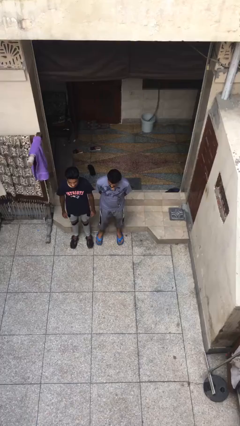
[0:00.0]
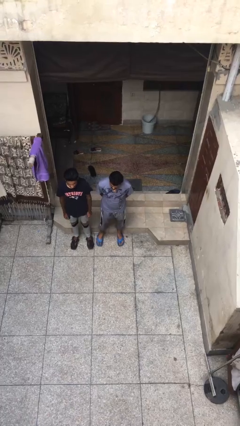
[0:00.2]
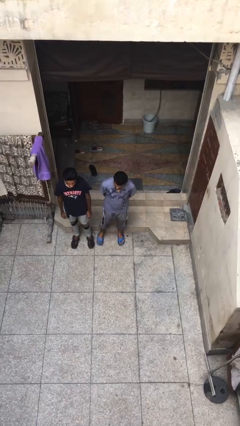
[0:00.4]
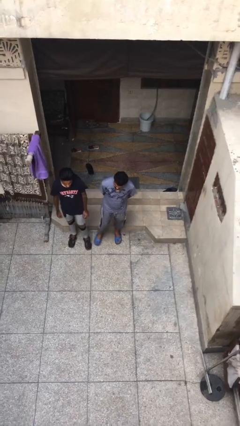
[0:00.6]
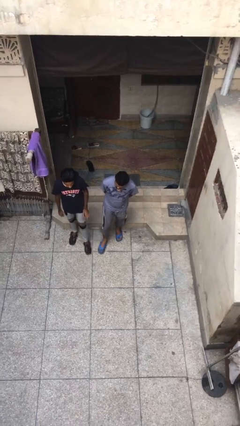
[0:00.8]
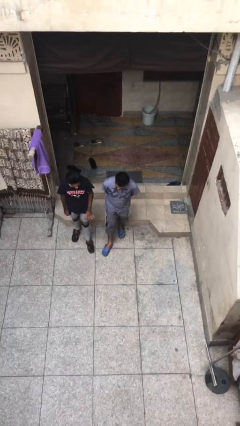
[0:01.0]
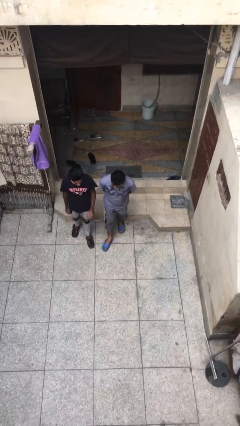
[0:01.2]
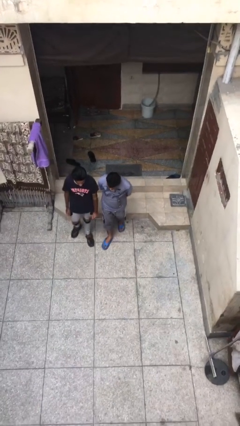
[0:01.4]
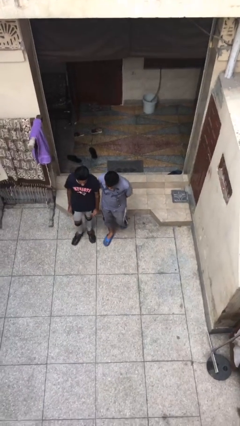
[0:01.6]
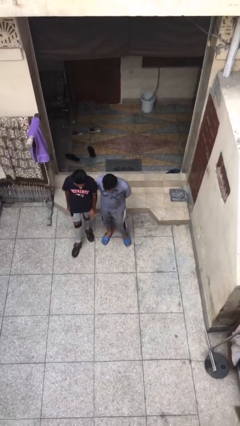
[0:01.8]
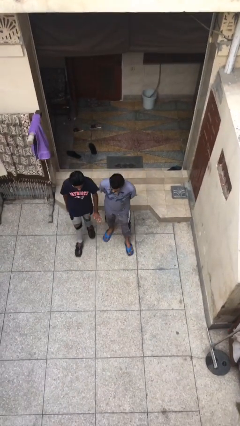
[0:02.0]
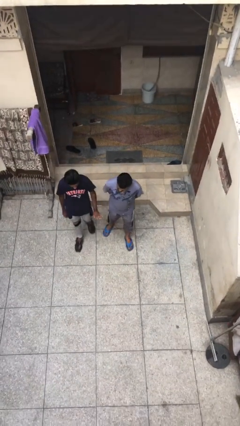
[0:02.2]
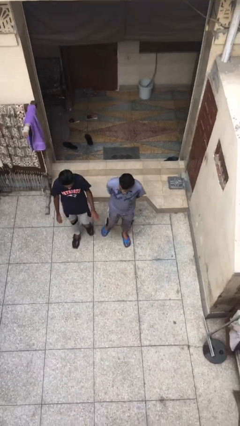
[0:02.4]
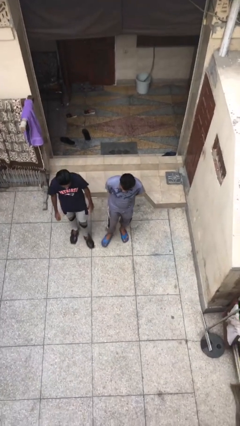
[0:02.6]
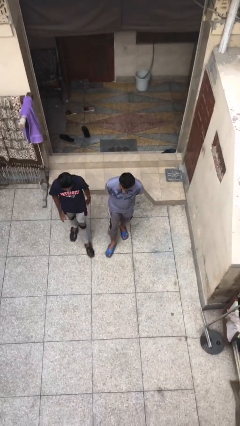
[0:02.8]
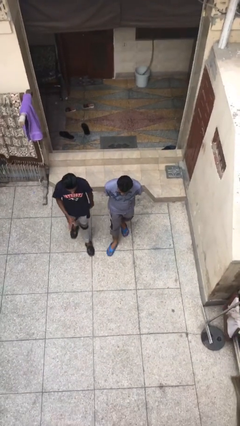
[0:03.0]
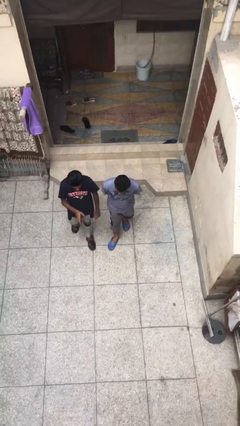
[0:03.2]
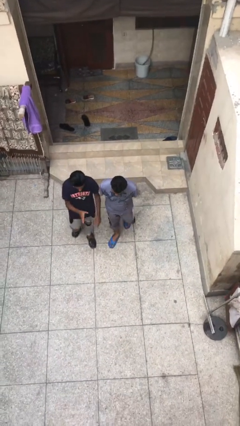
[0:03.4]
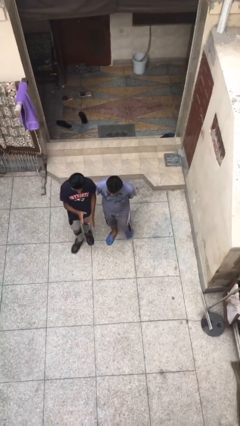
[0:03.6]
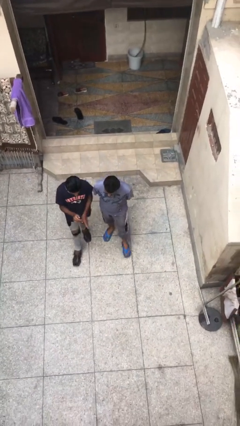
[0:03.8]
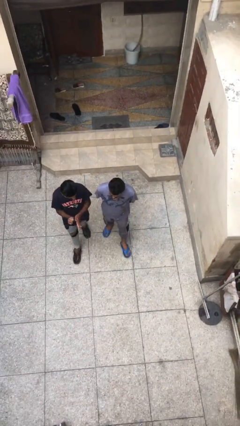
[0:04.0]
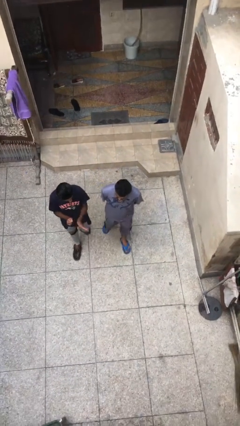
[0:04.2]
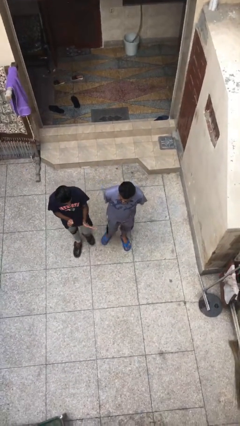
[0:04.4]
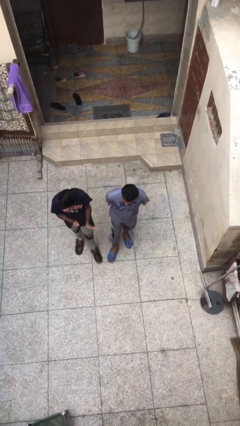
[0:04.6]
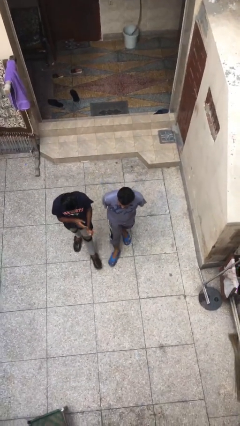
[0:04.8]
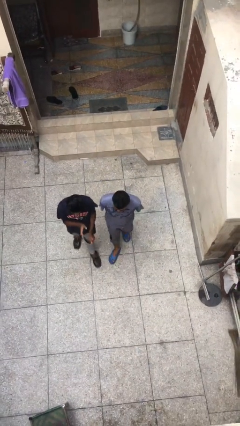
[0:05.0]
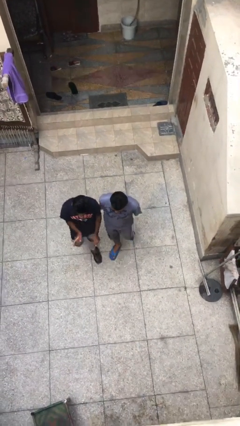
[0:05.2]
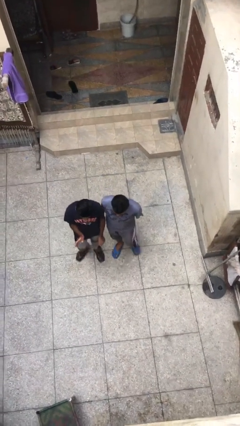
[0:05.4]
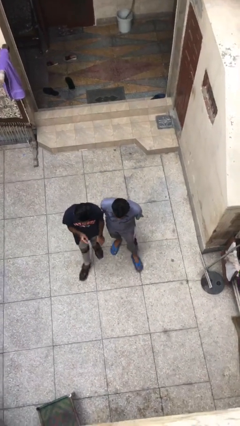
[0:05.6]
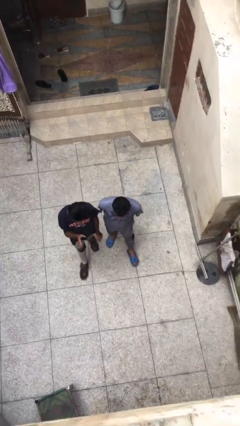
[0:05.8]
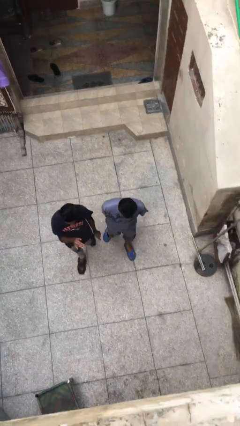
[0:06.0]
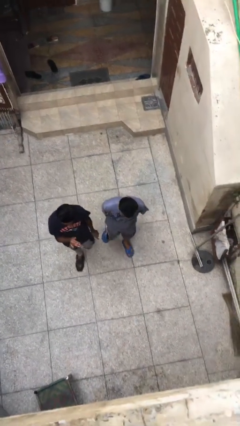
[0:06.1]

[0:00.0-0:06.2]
person talks to person

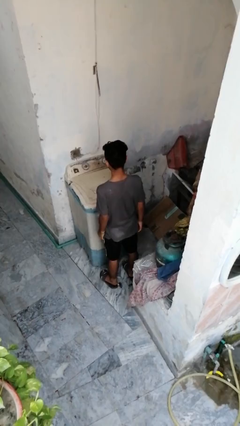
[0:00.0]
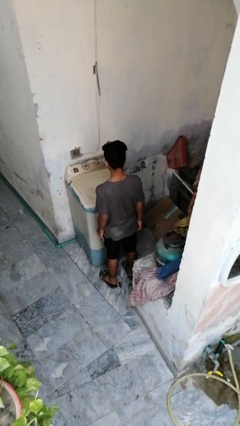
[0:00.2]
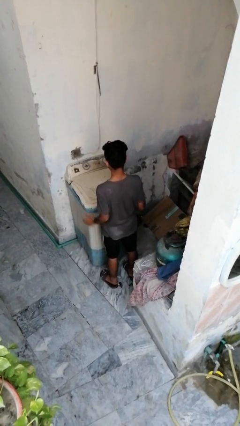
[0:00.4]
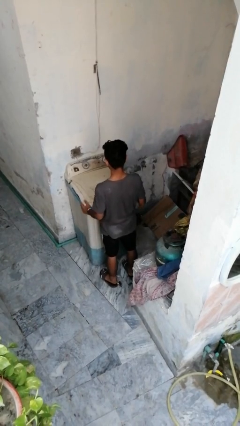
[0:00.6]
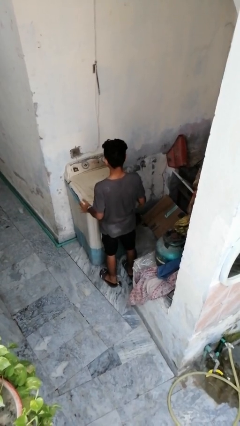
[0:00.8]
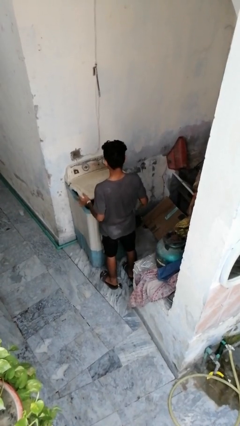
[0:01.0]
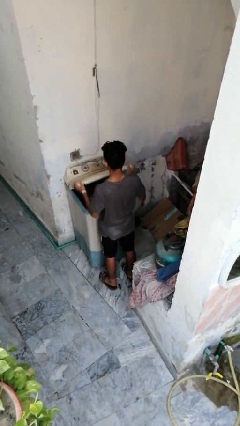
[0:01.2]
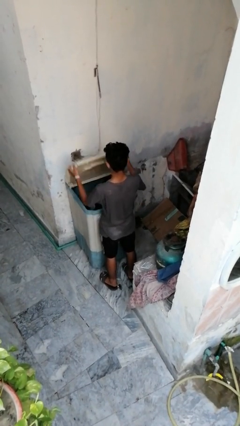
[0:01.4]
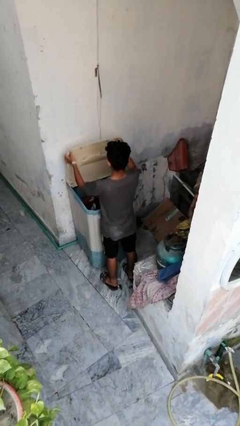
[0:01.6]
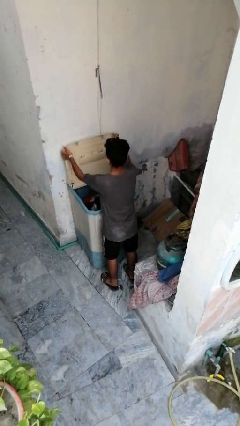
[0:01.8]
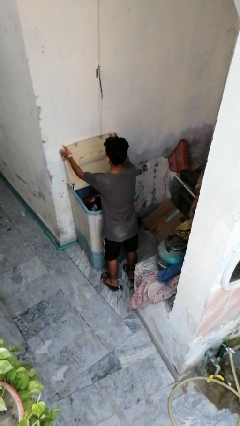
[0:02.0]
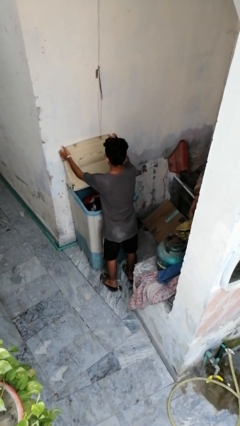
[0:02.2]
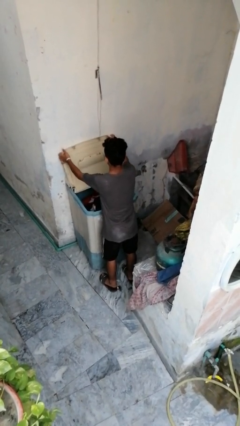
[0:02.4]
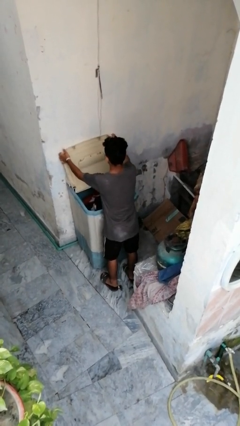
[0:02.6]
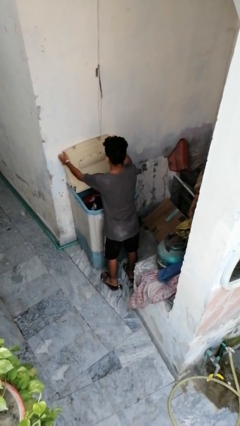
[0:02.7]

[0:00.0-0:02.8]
person opens clothes washer

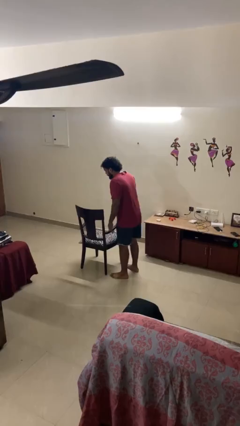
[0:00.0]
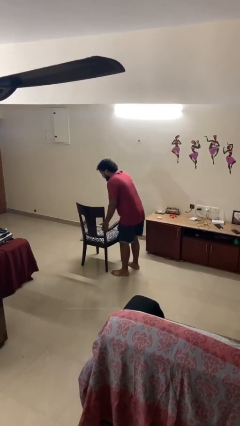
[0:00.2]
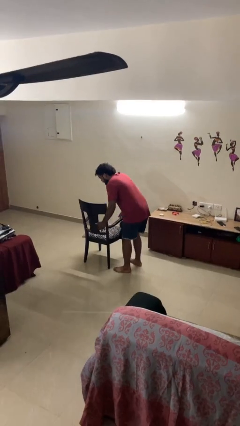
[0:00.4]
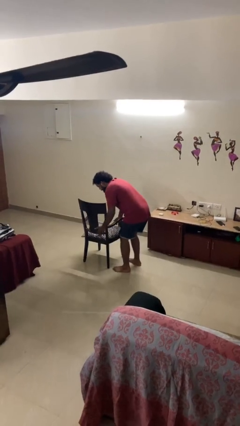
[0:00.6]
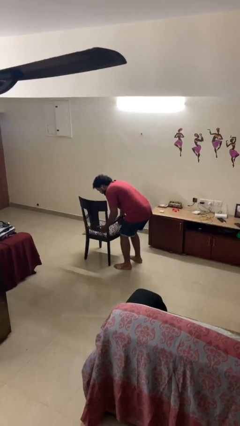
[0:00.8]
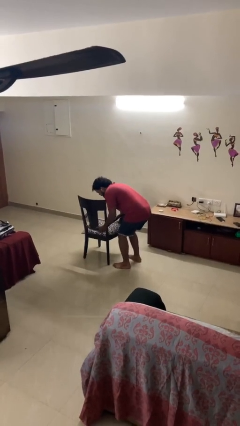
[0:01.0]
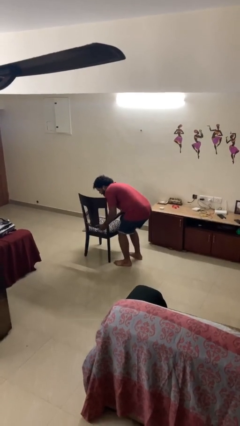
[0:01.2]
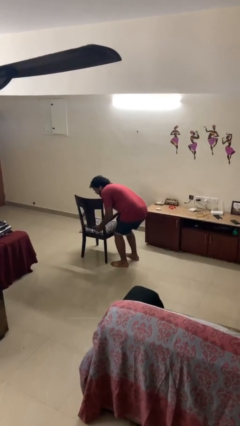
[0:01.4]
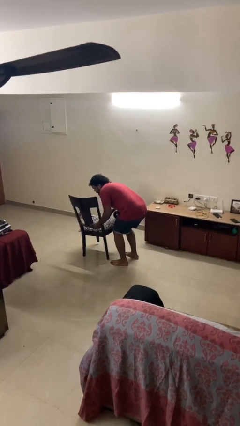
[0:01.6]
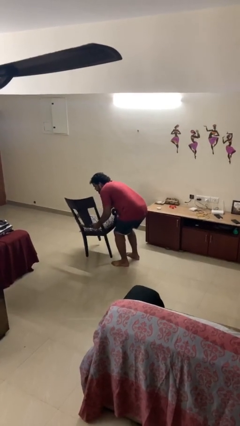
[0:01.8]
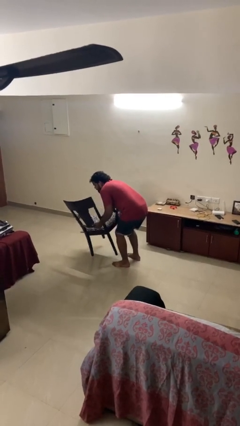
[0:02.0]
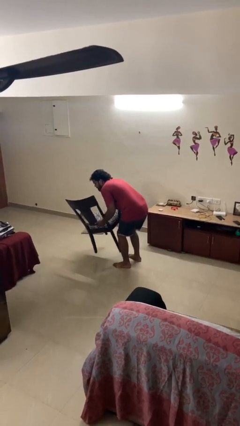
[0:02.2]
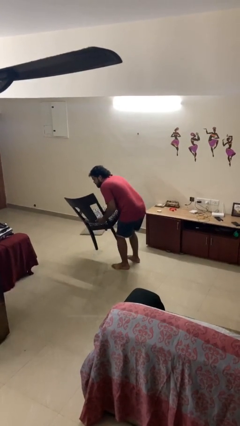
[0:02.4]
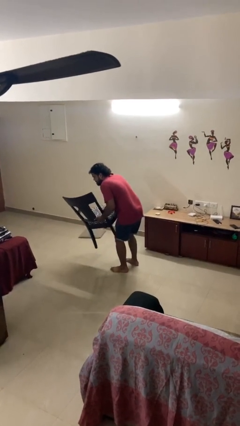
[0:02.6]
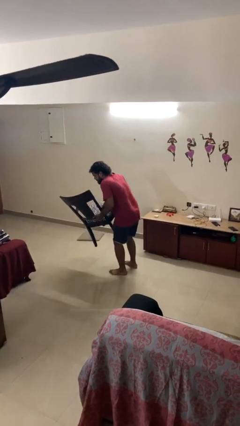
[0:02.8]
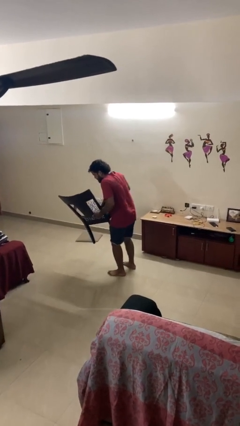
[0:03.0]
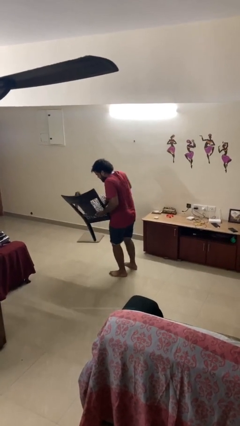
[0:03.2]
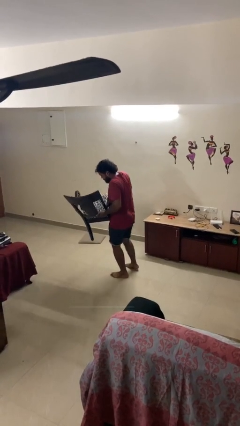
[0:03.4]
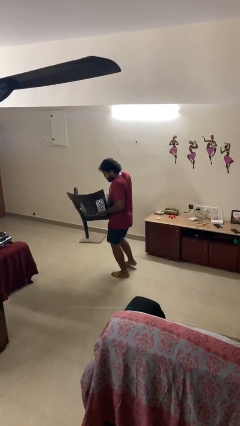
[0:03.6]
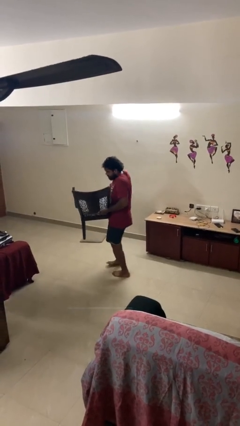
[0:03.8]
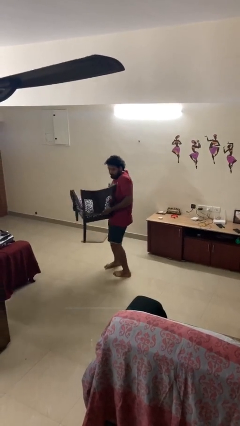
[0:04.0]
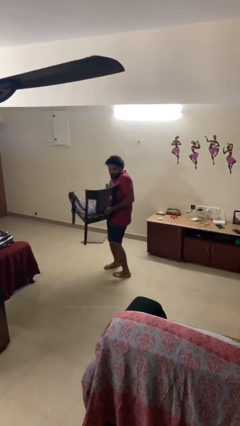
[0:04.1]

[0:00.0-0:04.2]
person picks up object from floor

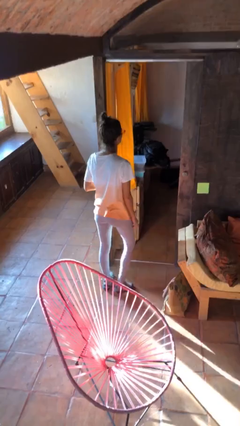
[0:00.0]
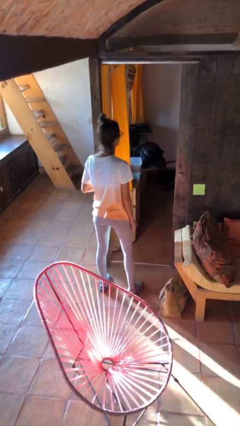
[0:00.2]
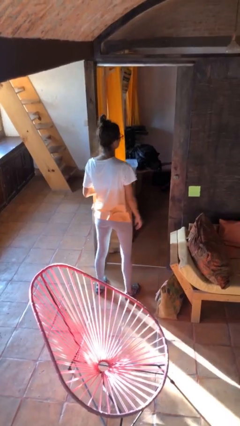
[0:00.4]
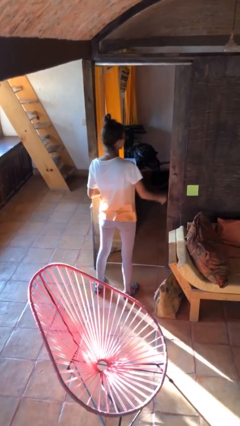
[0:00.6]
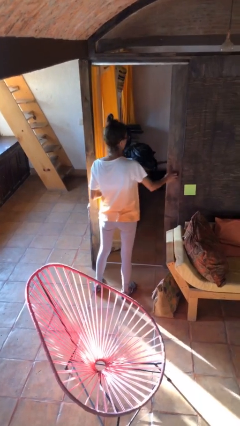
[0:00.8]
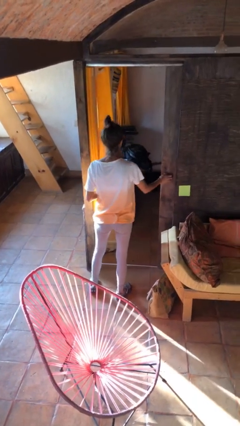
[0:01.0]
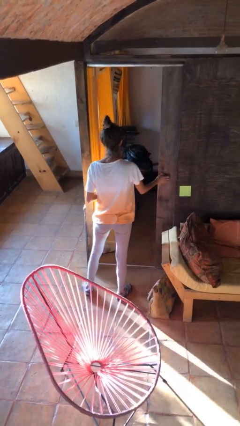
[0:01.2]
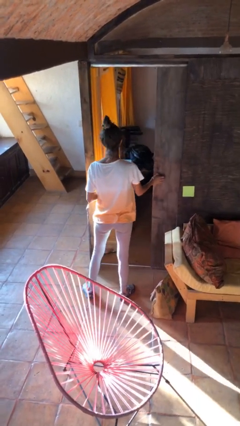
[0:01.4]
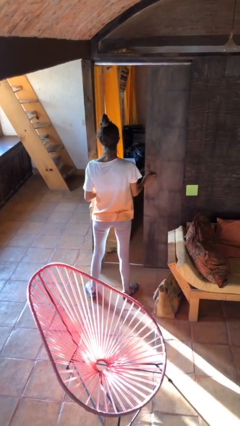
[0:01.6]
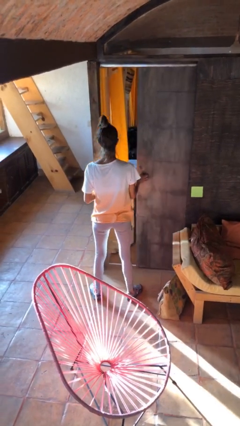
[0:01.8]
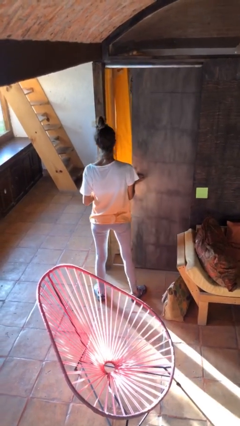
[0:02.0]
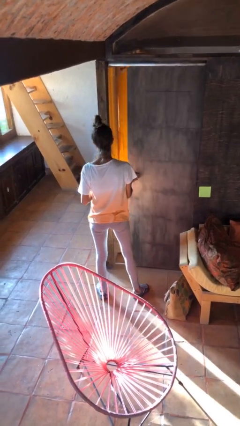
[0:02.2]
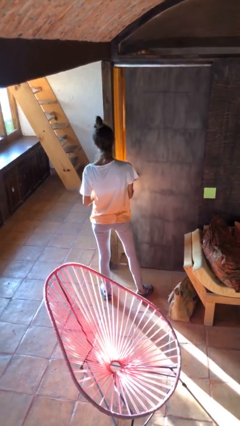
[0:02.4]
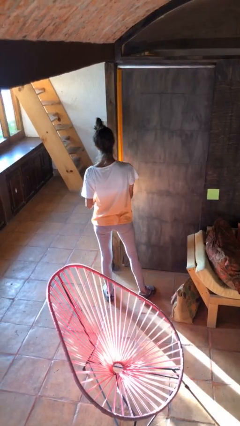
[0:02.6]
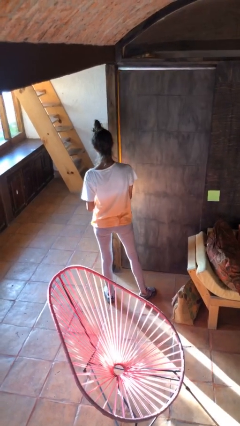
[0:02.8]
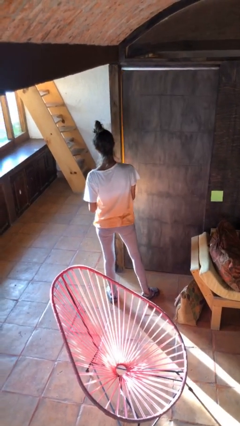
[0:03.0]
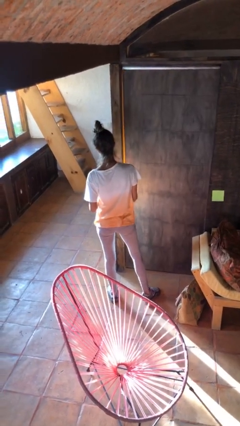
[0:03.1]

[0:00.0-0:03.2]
person closes sliding door

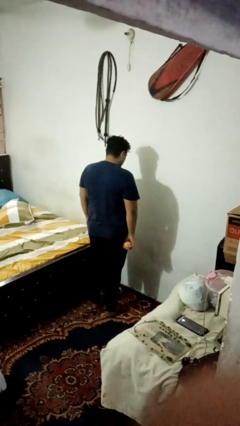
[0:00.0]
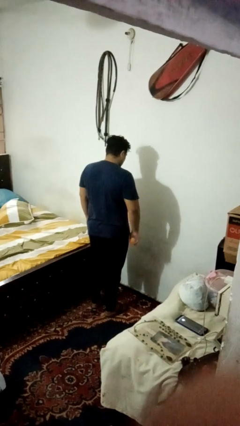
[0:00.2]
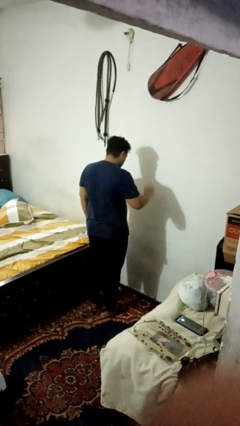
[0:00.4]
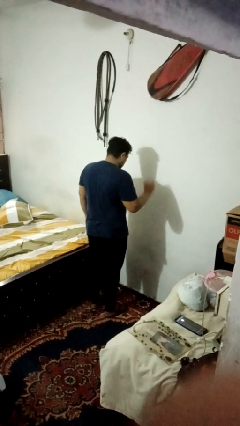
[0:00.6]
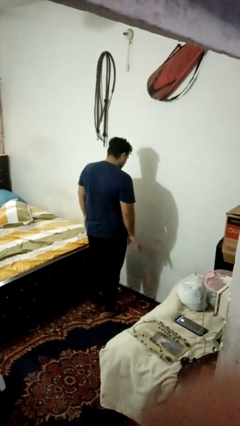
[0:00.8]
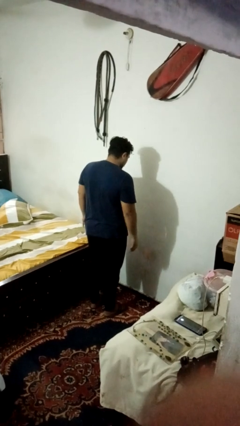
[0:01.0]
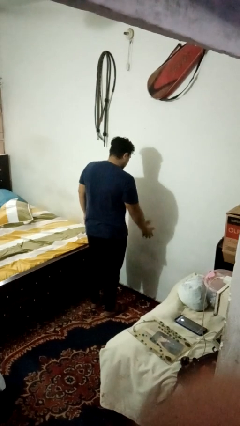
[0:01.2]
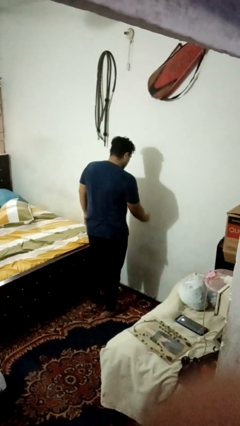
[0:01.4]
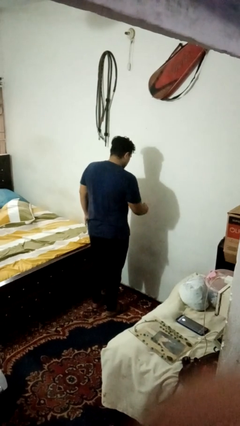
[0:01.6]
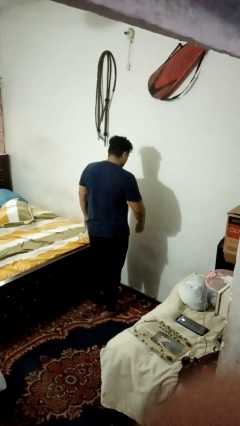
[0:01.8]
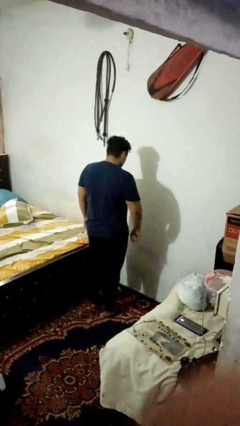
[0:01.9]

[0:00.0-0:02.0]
person bounces ball on floor
